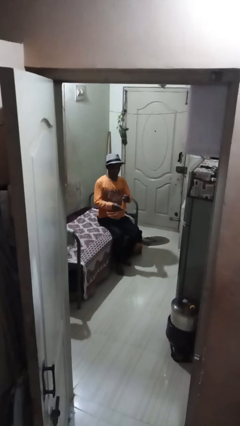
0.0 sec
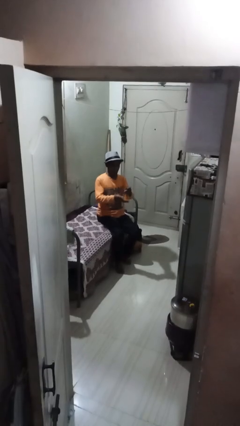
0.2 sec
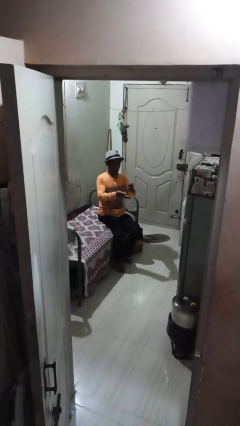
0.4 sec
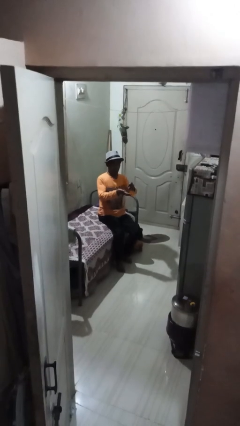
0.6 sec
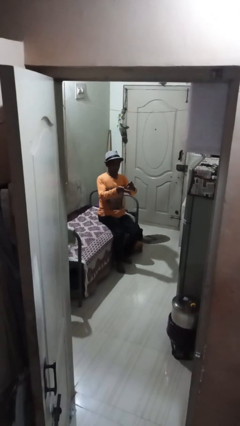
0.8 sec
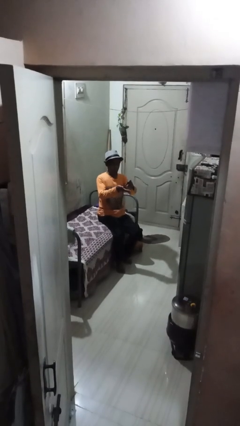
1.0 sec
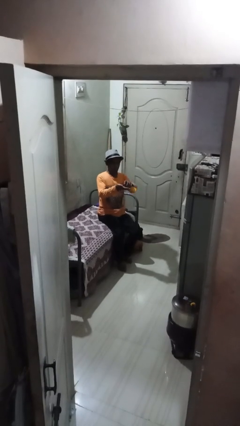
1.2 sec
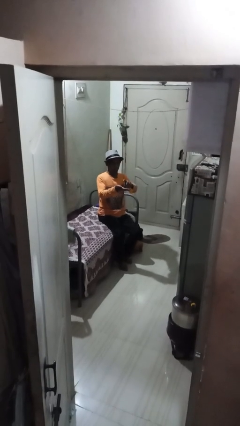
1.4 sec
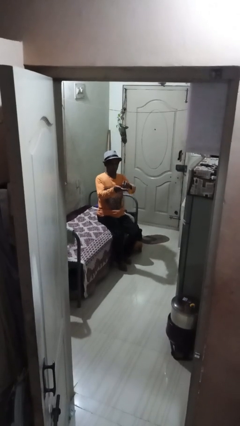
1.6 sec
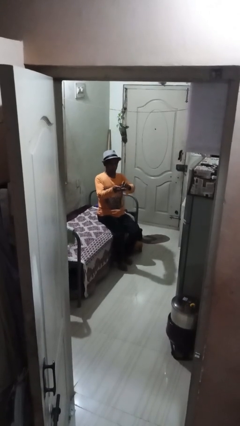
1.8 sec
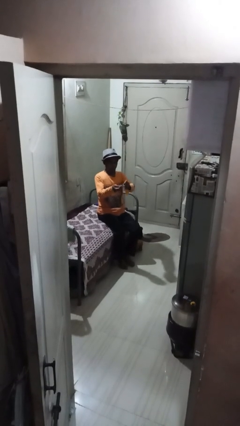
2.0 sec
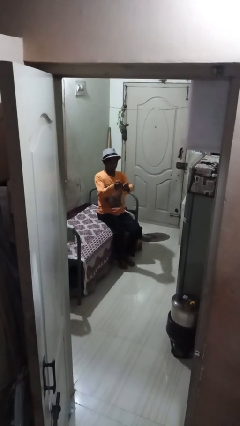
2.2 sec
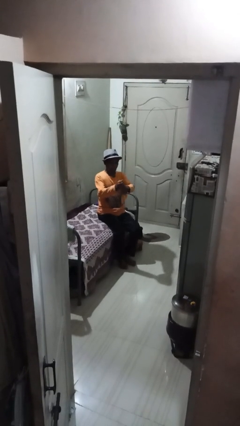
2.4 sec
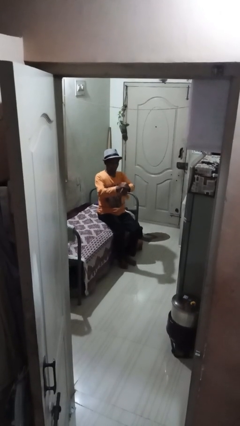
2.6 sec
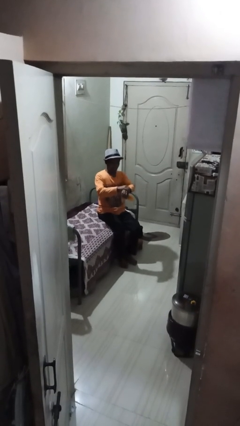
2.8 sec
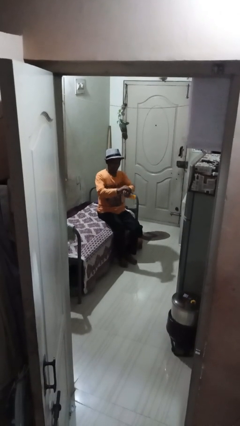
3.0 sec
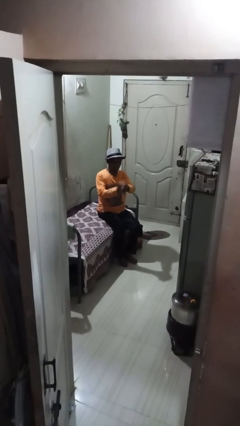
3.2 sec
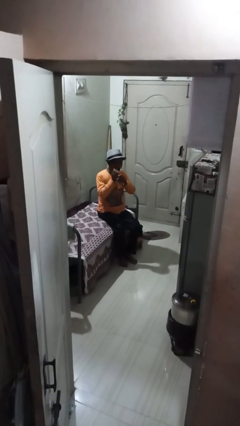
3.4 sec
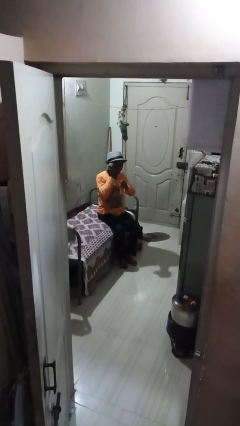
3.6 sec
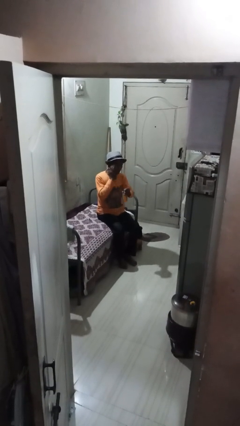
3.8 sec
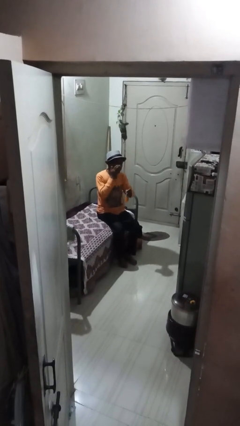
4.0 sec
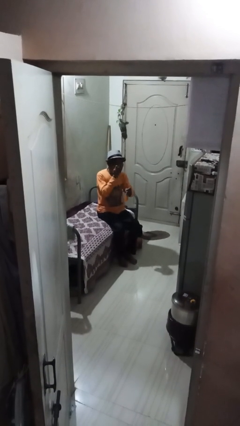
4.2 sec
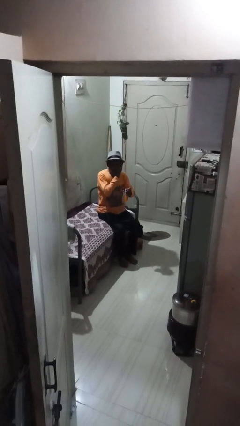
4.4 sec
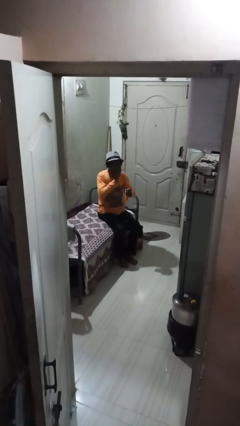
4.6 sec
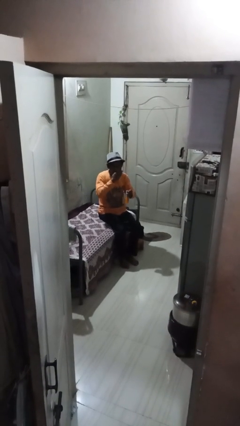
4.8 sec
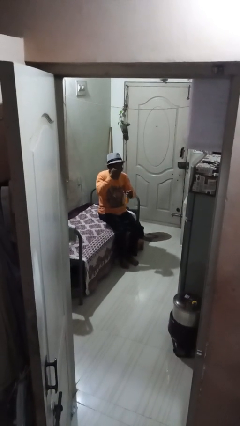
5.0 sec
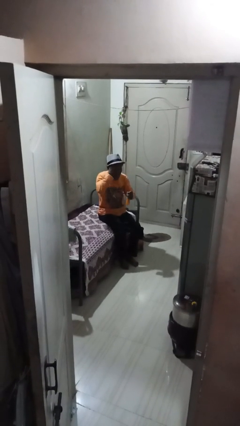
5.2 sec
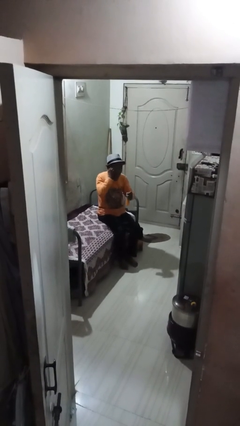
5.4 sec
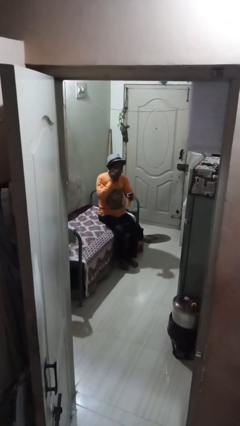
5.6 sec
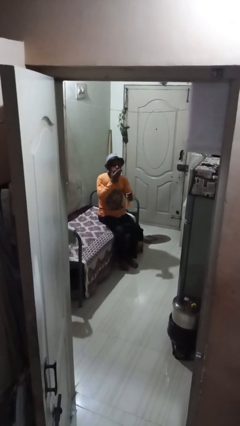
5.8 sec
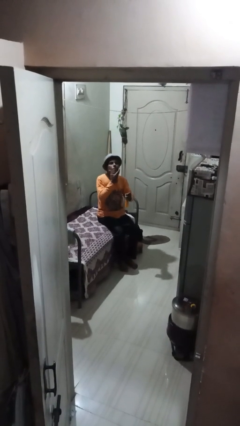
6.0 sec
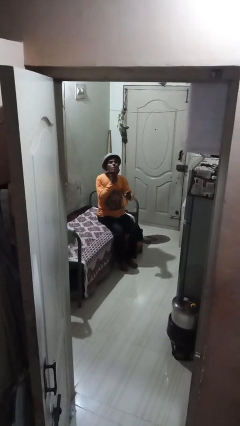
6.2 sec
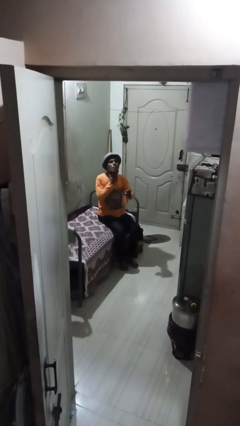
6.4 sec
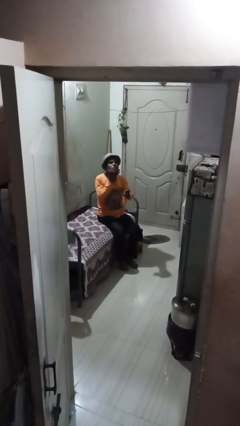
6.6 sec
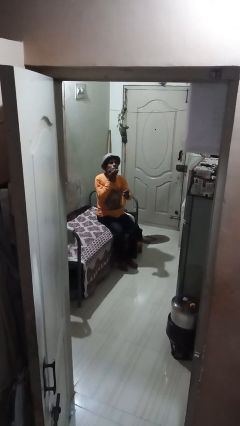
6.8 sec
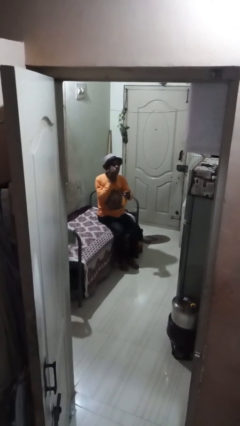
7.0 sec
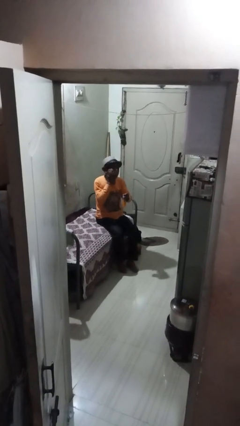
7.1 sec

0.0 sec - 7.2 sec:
person applies sunscreen

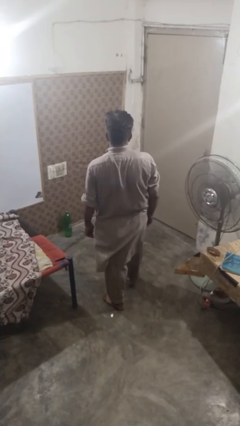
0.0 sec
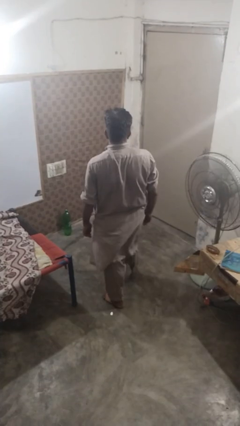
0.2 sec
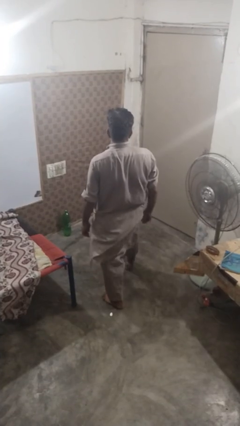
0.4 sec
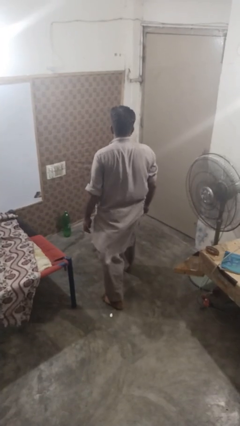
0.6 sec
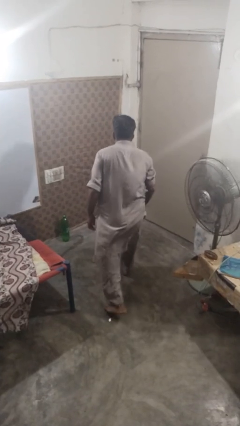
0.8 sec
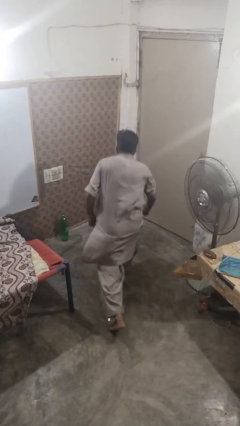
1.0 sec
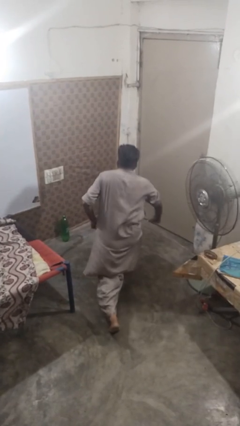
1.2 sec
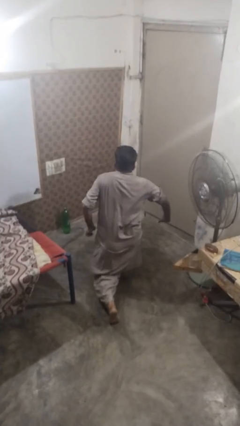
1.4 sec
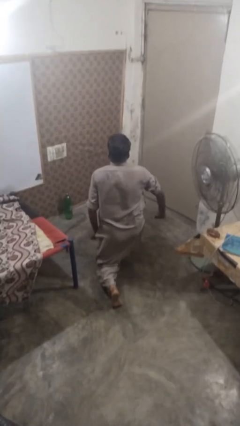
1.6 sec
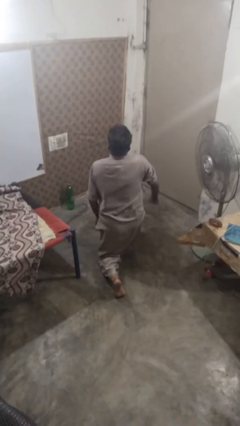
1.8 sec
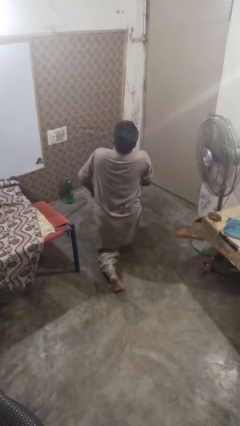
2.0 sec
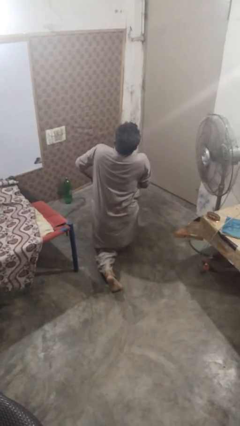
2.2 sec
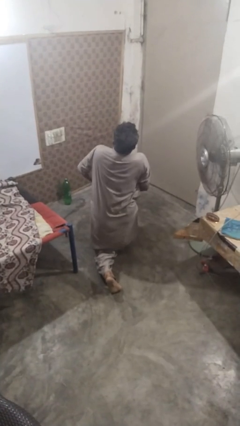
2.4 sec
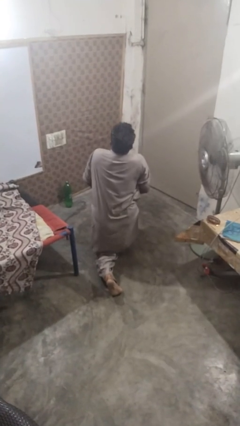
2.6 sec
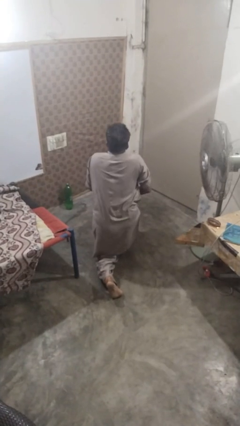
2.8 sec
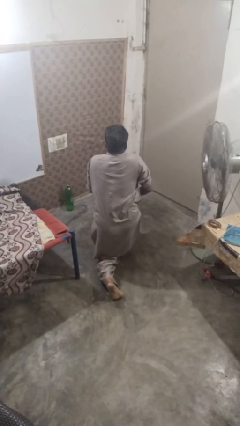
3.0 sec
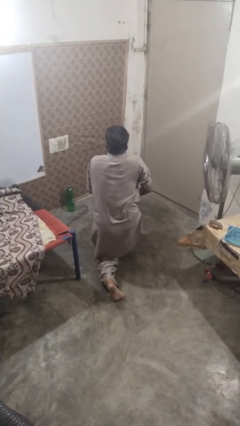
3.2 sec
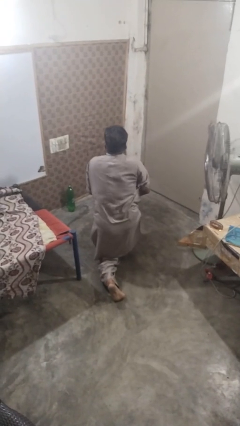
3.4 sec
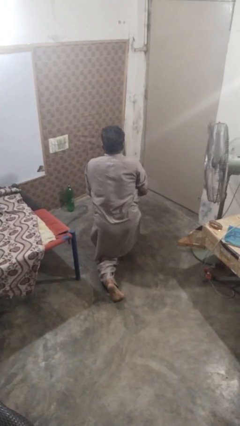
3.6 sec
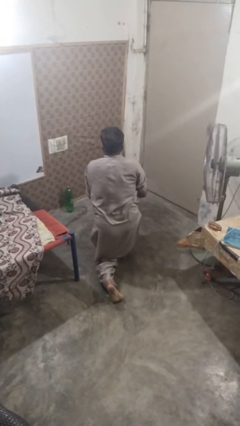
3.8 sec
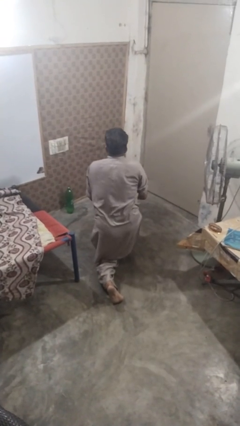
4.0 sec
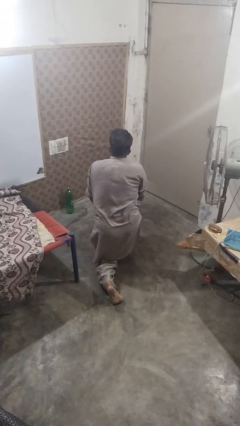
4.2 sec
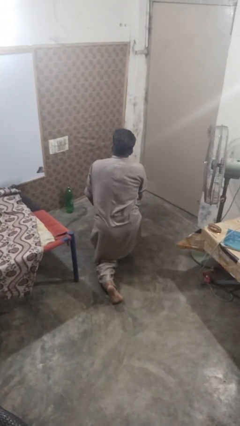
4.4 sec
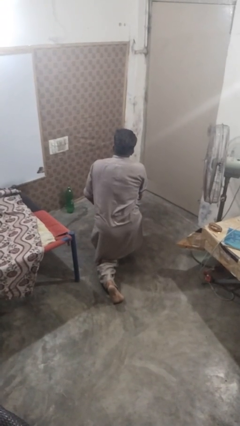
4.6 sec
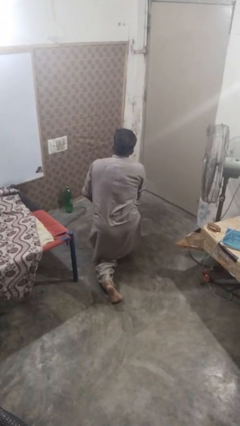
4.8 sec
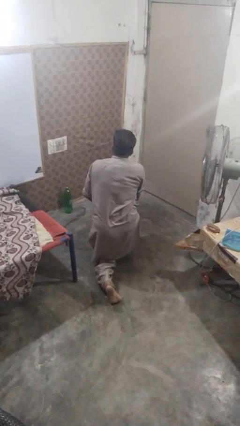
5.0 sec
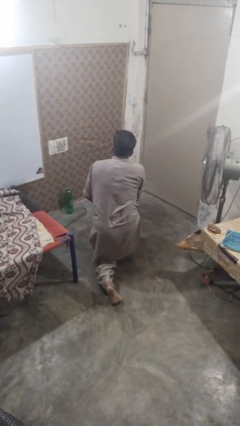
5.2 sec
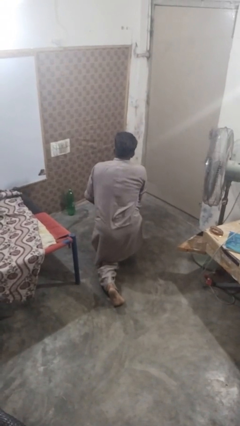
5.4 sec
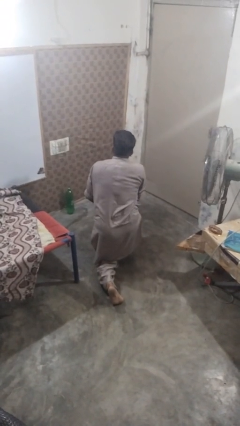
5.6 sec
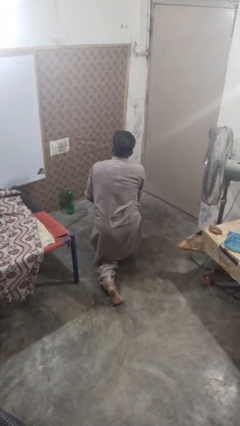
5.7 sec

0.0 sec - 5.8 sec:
person kneels

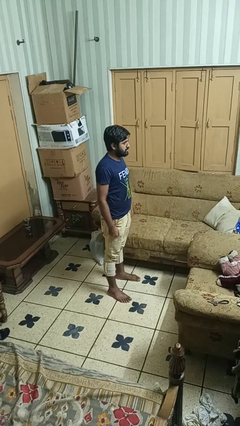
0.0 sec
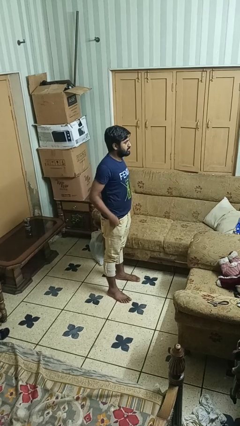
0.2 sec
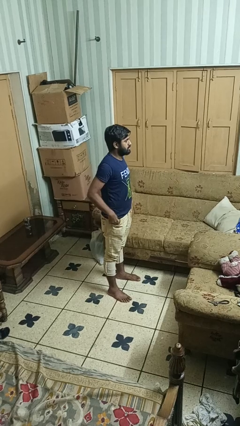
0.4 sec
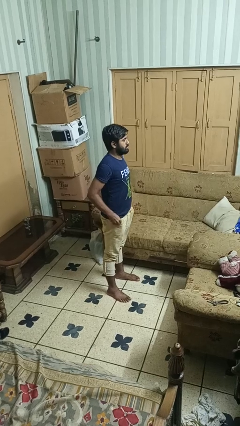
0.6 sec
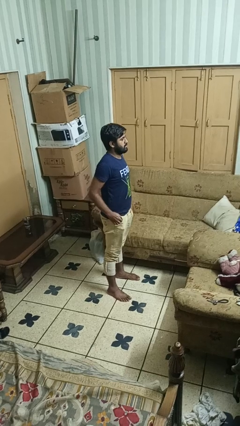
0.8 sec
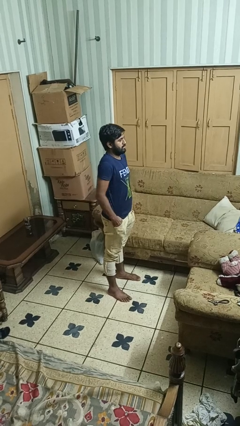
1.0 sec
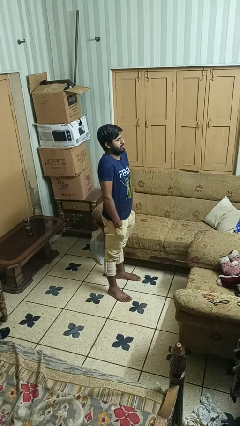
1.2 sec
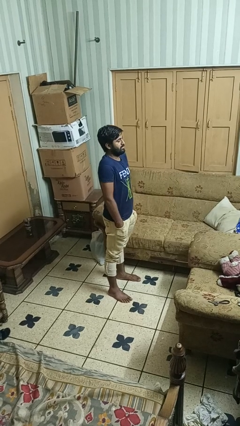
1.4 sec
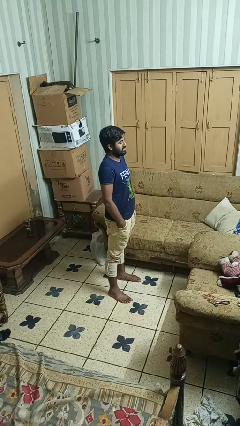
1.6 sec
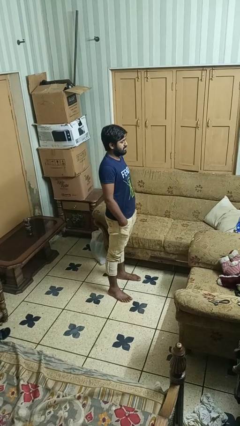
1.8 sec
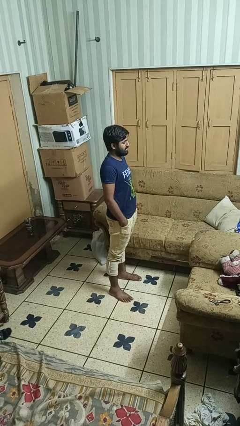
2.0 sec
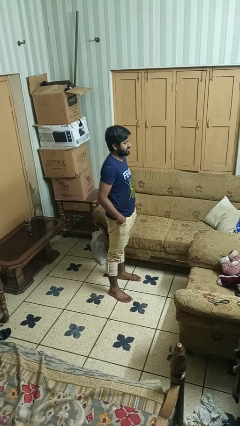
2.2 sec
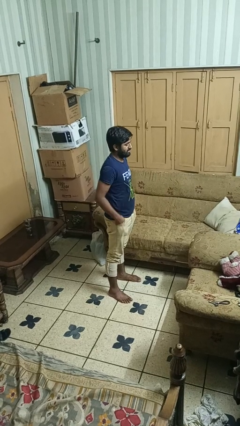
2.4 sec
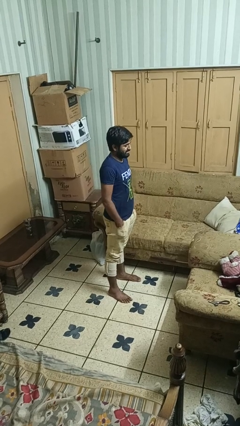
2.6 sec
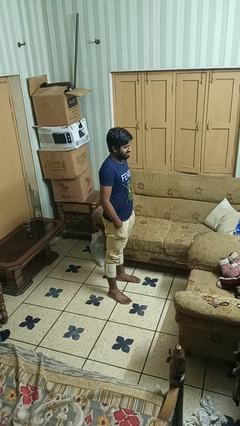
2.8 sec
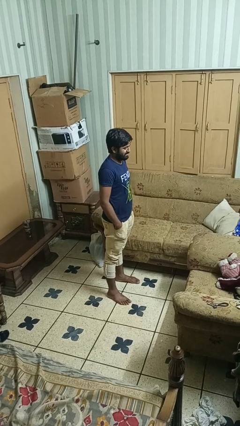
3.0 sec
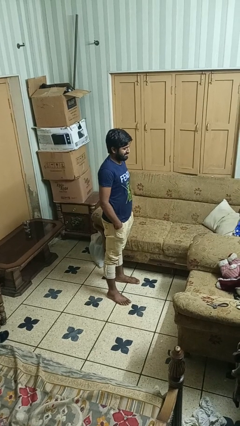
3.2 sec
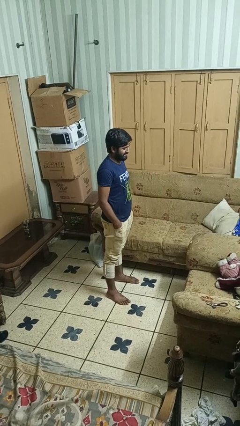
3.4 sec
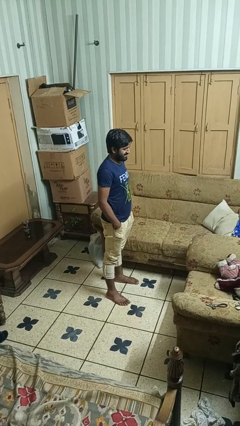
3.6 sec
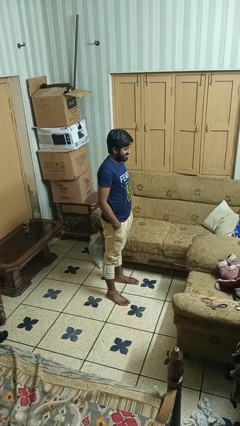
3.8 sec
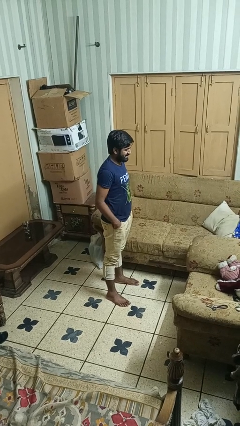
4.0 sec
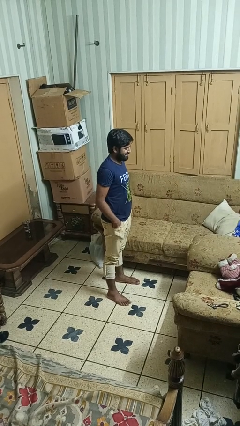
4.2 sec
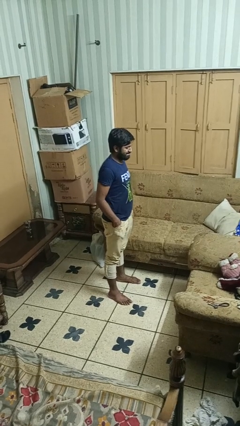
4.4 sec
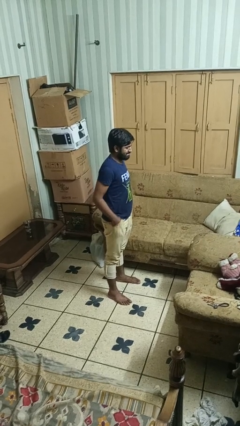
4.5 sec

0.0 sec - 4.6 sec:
person puts hands in back pockets

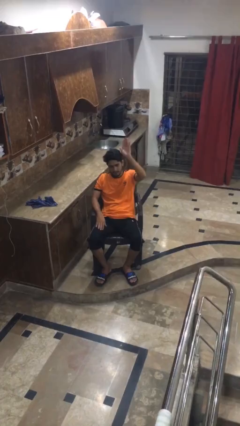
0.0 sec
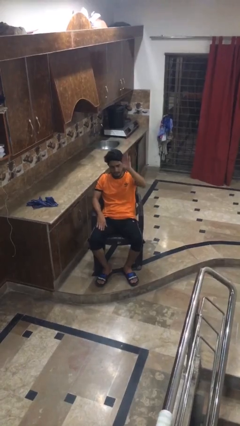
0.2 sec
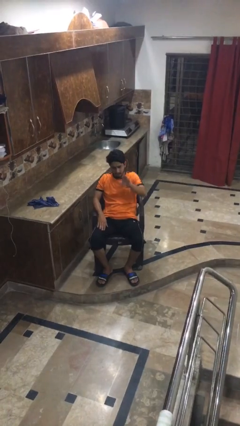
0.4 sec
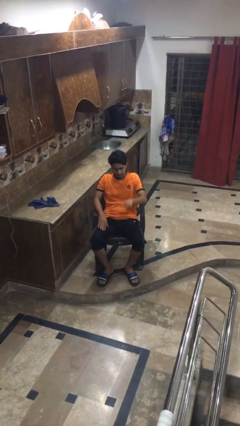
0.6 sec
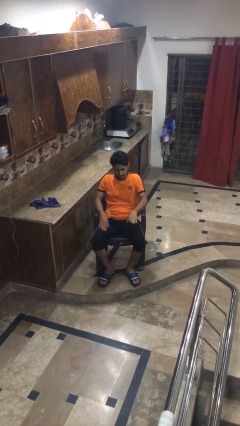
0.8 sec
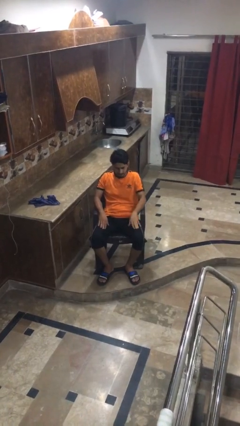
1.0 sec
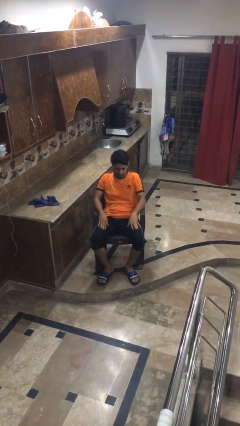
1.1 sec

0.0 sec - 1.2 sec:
person gestures lower hand
